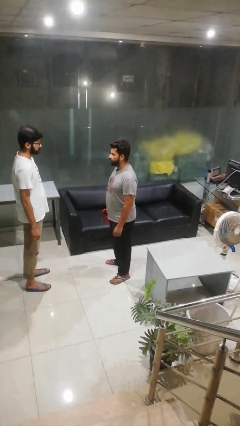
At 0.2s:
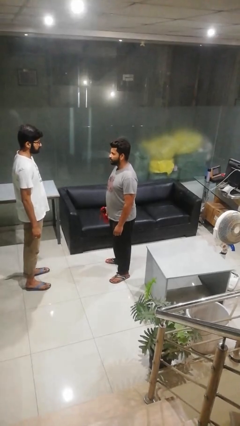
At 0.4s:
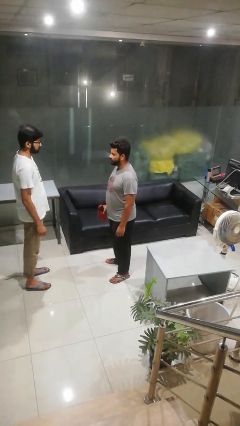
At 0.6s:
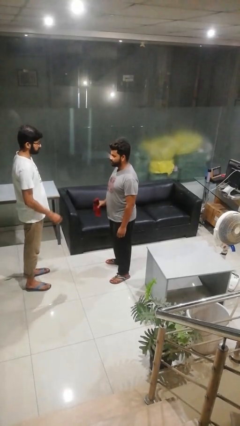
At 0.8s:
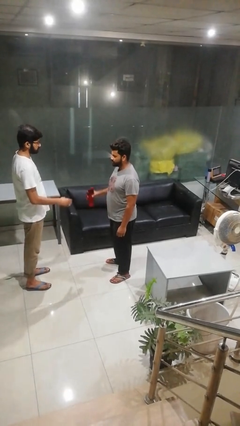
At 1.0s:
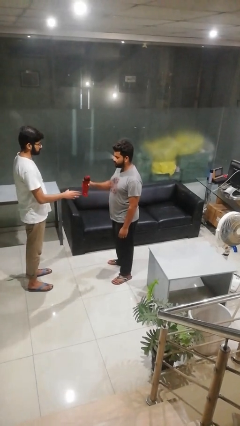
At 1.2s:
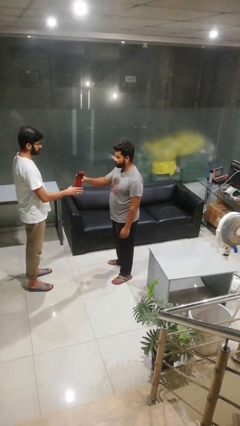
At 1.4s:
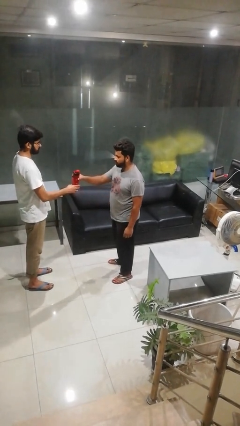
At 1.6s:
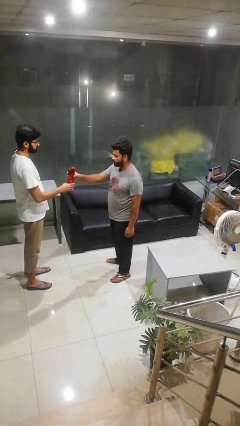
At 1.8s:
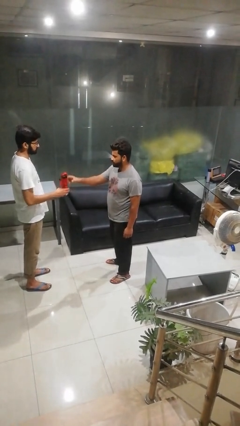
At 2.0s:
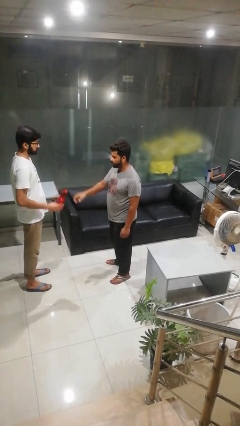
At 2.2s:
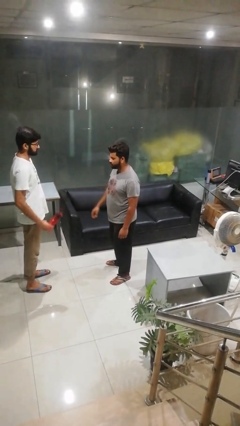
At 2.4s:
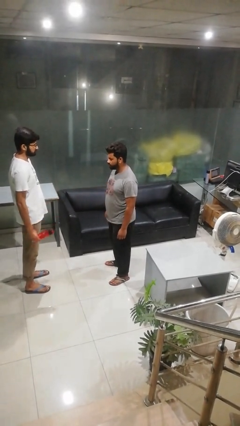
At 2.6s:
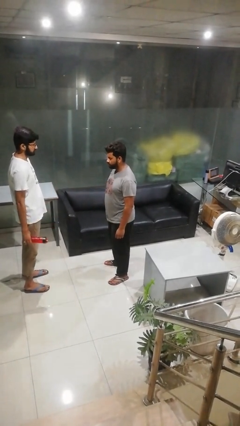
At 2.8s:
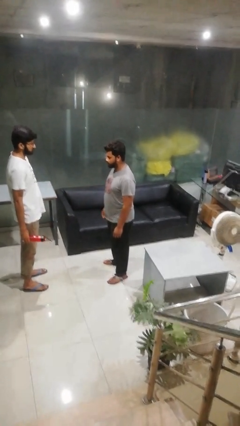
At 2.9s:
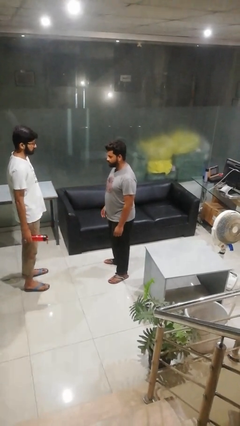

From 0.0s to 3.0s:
person transfers object to person

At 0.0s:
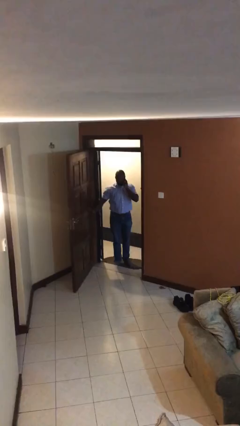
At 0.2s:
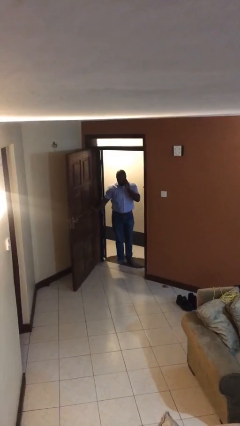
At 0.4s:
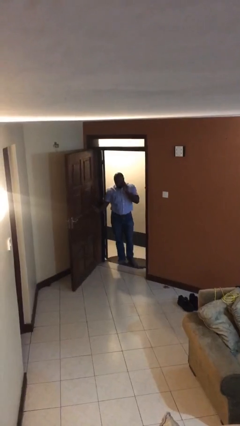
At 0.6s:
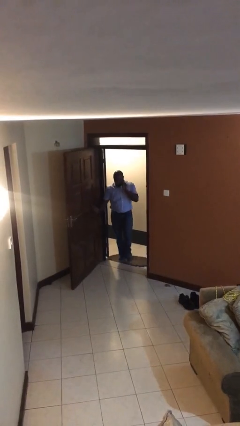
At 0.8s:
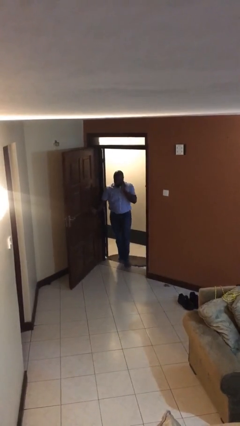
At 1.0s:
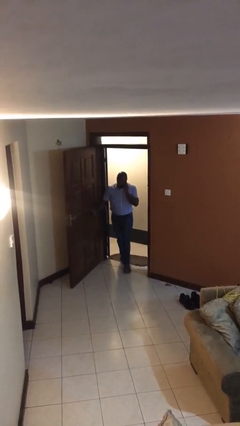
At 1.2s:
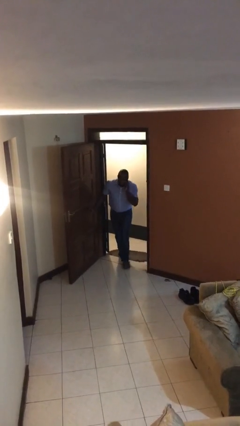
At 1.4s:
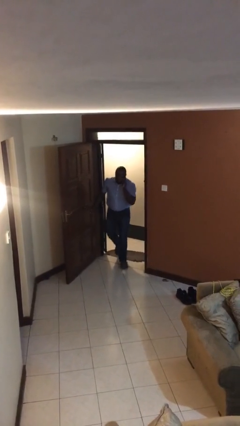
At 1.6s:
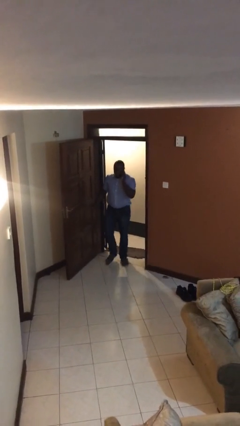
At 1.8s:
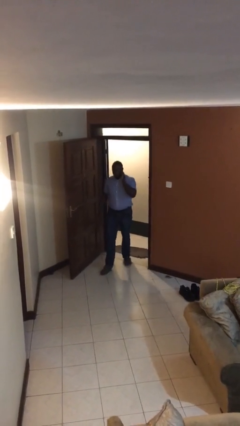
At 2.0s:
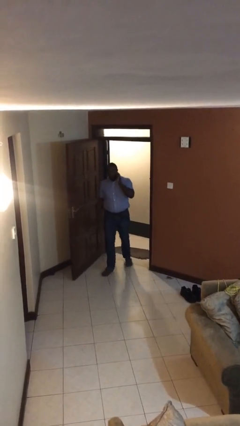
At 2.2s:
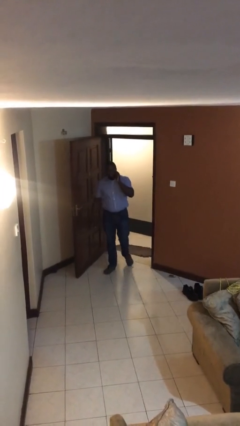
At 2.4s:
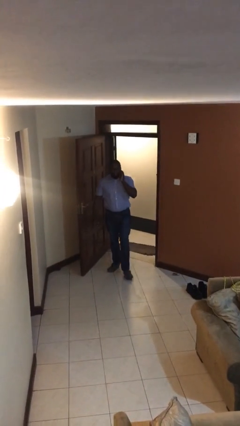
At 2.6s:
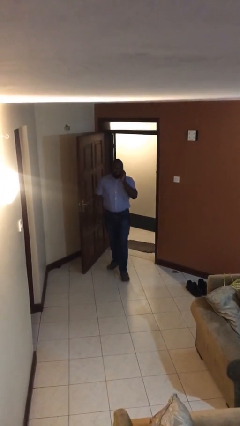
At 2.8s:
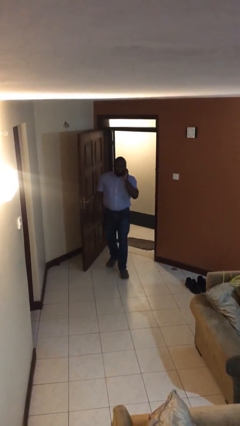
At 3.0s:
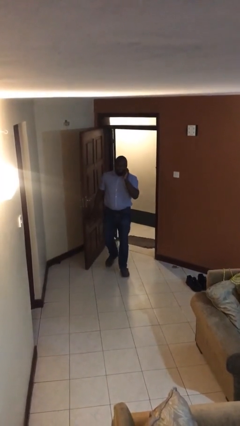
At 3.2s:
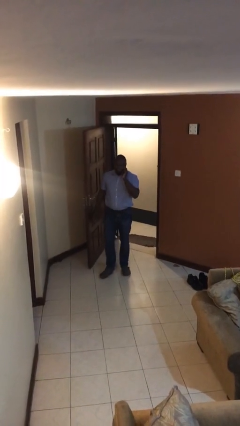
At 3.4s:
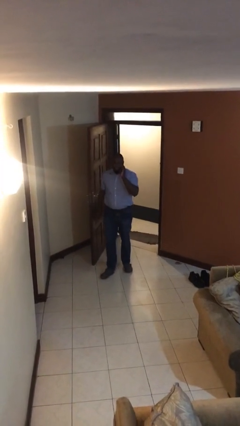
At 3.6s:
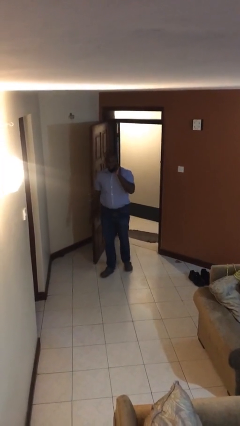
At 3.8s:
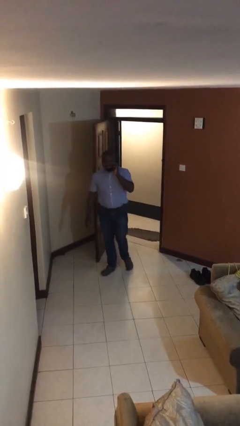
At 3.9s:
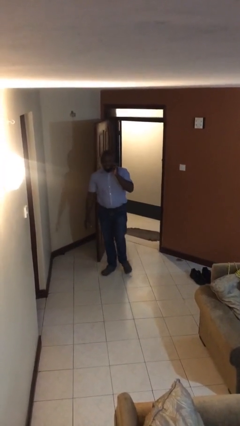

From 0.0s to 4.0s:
person enters scene through structure

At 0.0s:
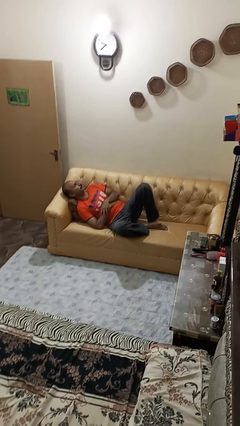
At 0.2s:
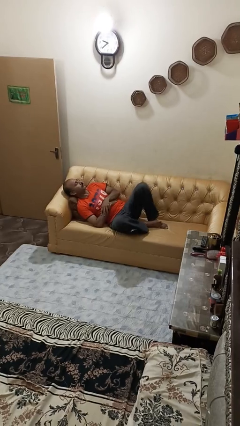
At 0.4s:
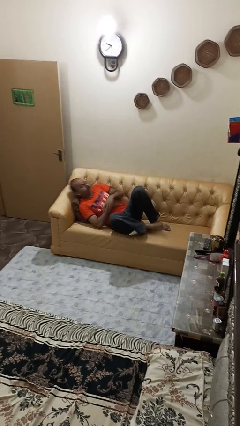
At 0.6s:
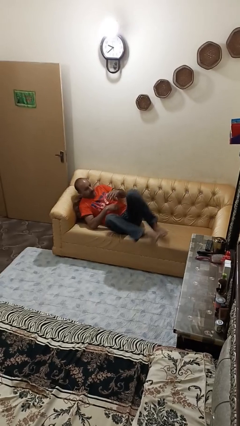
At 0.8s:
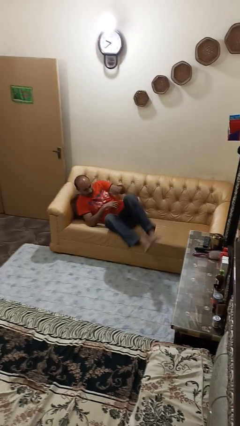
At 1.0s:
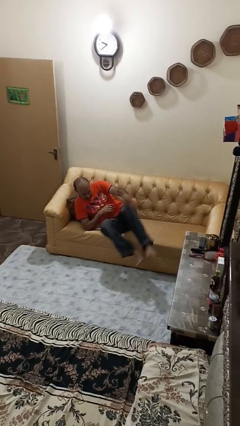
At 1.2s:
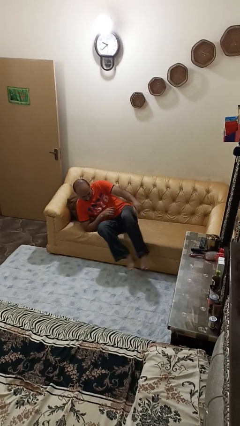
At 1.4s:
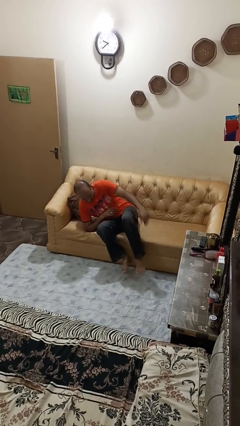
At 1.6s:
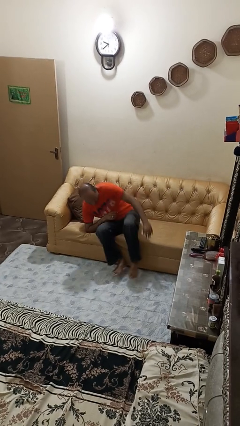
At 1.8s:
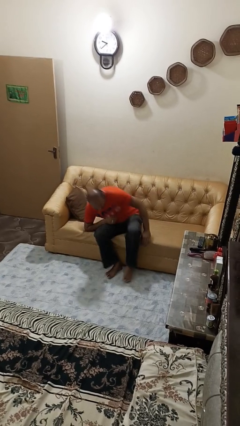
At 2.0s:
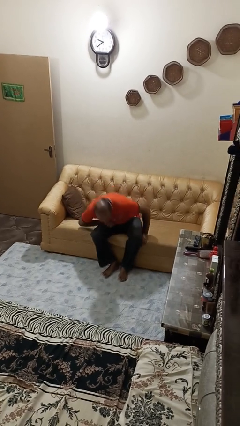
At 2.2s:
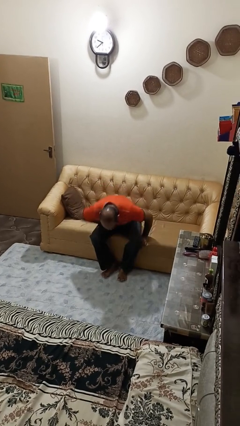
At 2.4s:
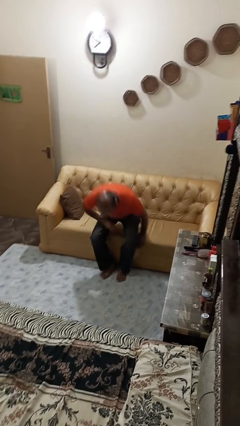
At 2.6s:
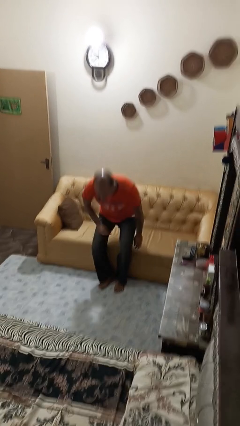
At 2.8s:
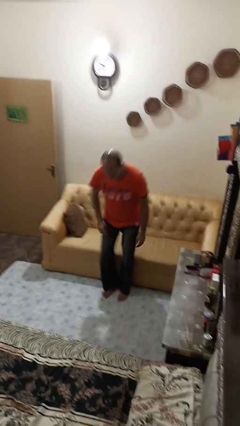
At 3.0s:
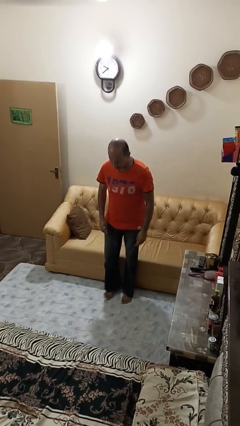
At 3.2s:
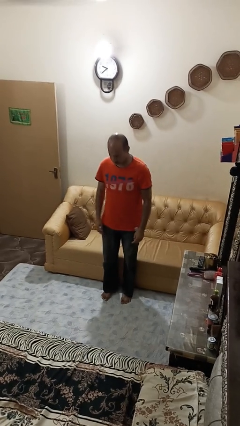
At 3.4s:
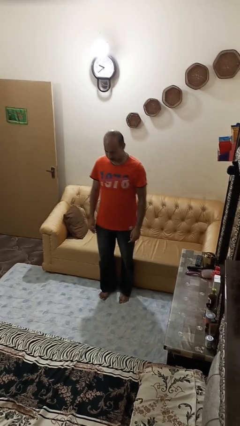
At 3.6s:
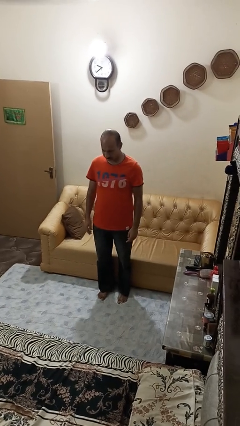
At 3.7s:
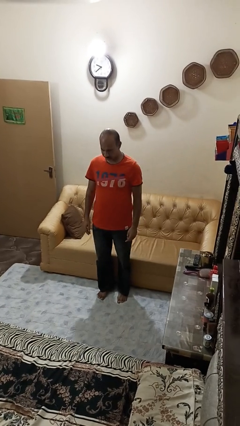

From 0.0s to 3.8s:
person stands up

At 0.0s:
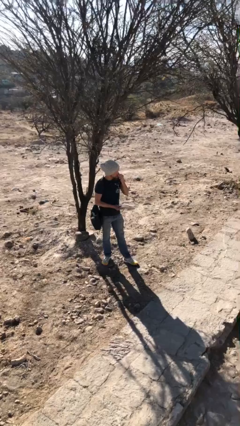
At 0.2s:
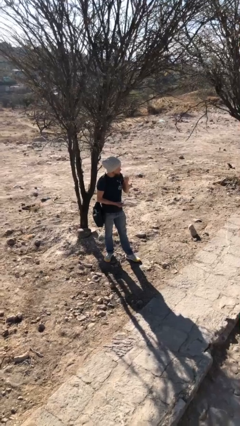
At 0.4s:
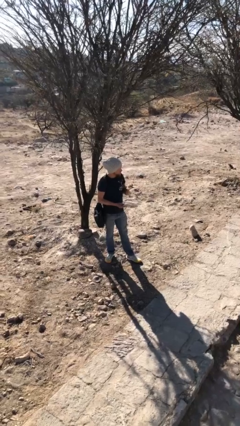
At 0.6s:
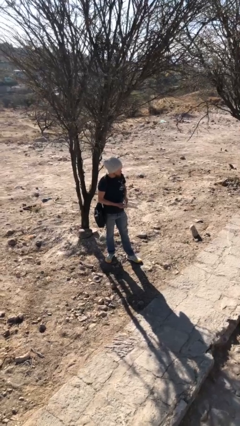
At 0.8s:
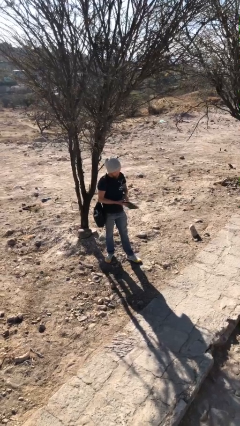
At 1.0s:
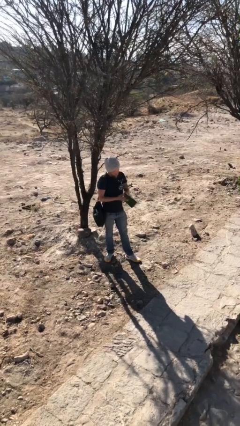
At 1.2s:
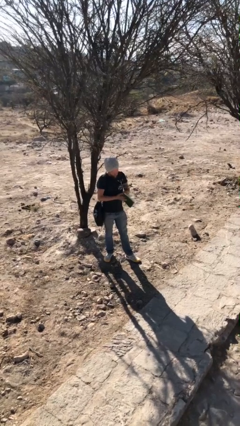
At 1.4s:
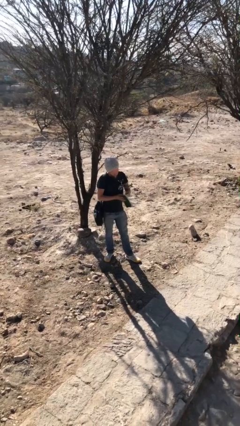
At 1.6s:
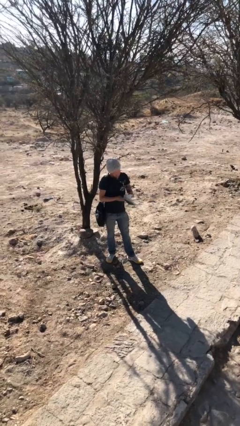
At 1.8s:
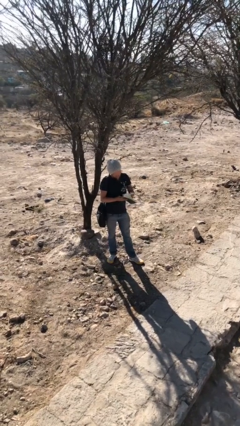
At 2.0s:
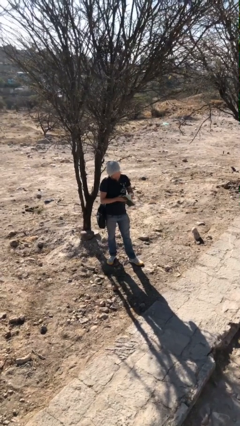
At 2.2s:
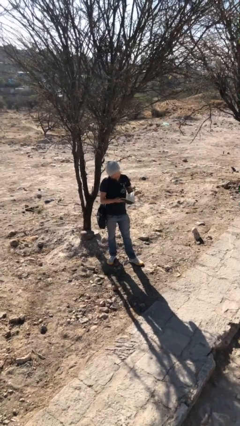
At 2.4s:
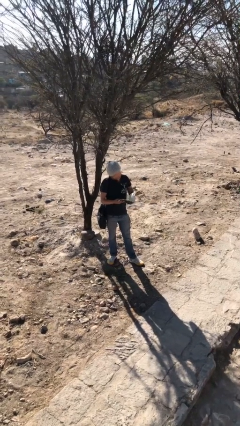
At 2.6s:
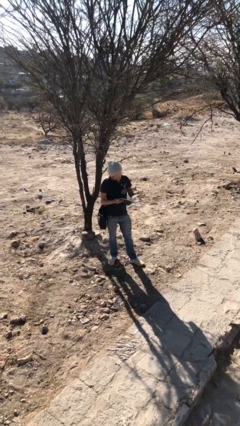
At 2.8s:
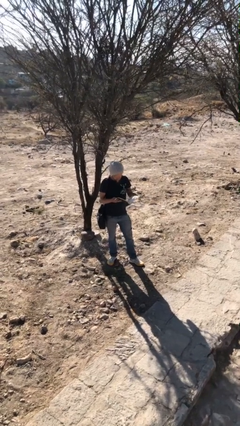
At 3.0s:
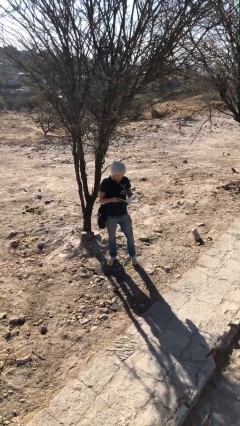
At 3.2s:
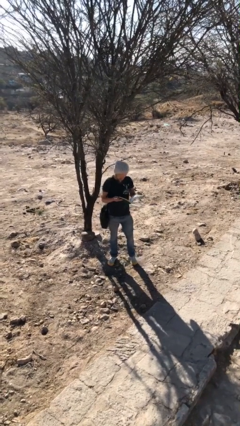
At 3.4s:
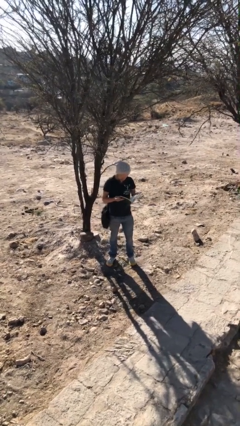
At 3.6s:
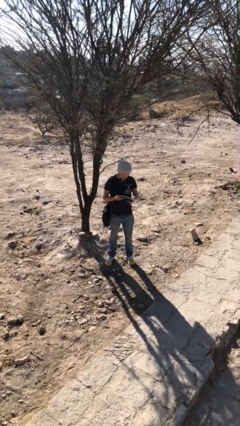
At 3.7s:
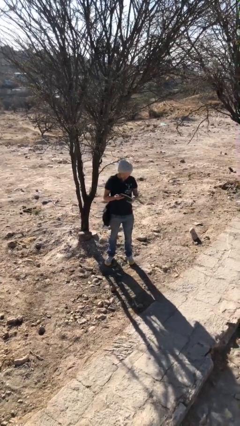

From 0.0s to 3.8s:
person reads document

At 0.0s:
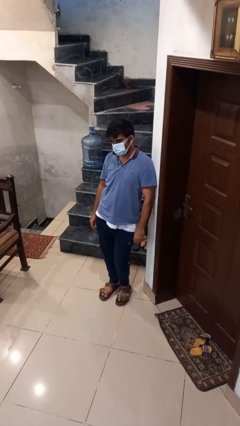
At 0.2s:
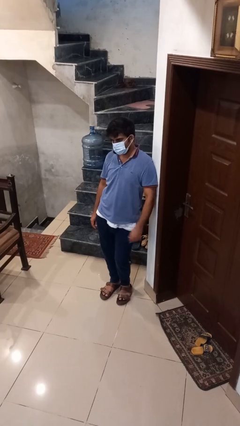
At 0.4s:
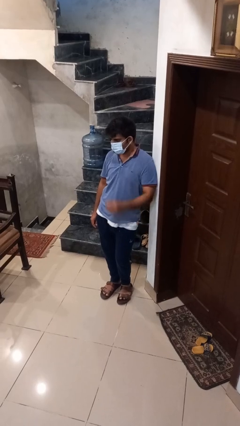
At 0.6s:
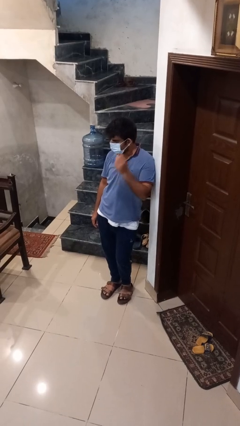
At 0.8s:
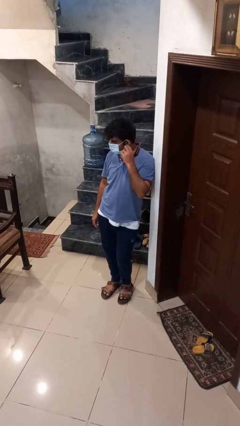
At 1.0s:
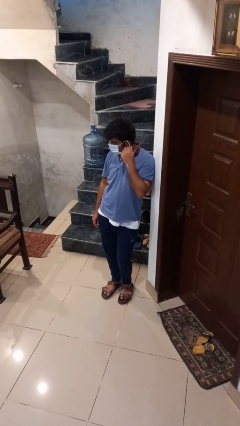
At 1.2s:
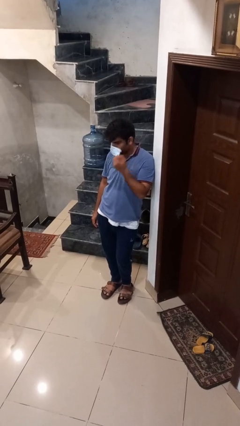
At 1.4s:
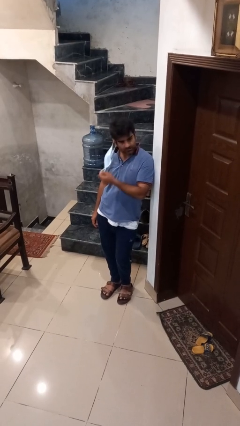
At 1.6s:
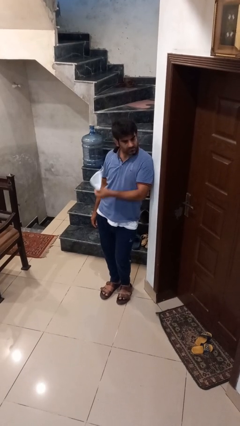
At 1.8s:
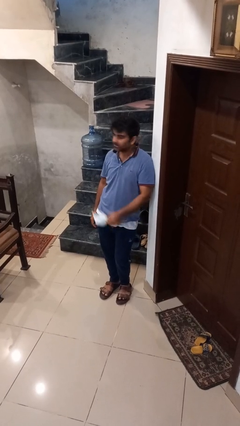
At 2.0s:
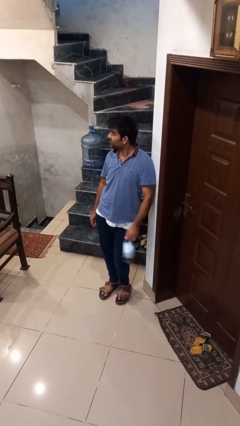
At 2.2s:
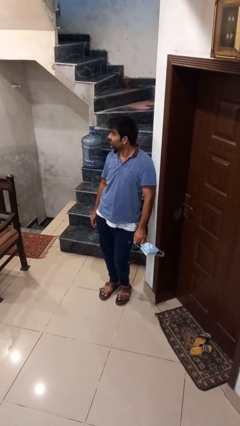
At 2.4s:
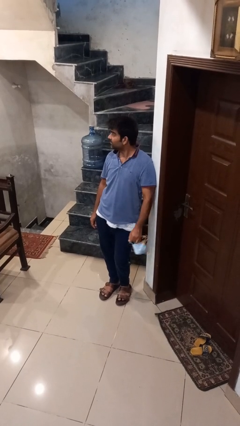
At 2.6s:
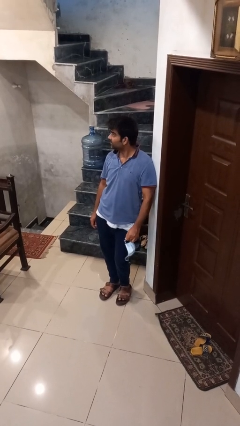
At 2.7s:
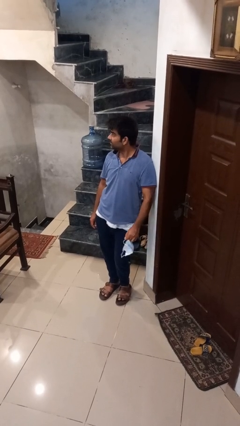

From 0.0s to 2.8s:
person takes off facemask
